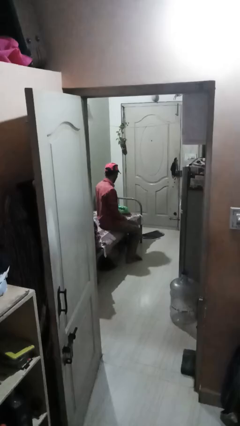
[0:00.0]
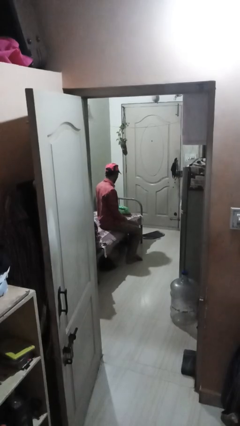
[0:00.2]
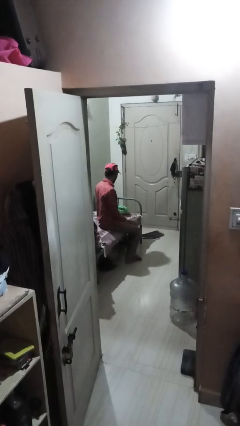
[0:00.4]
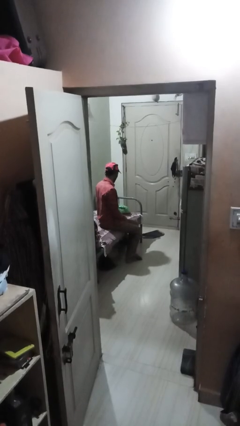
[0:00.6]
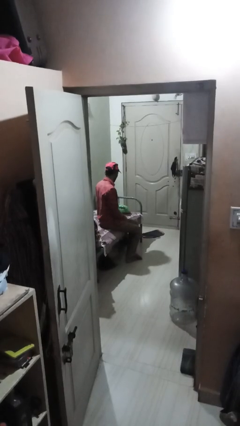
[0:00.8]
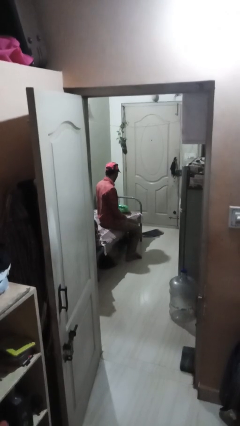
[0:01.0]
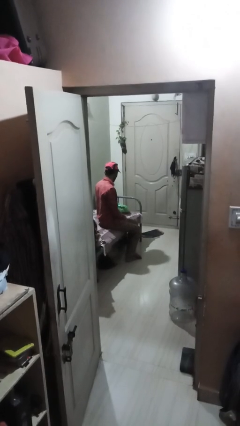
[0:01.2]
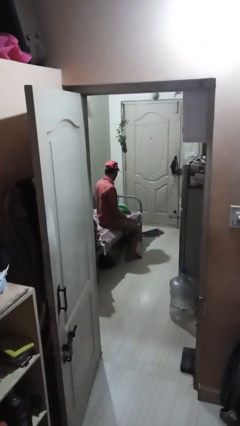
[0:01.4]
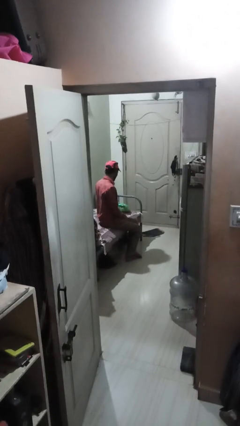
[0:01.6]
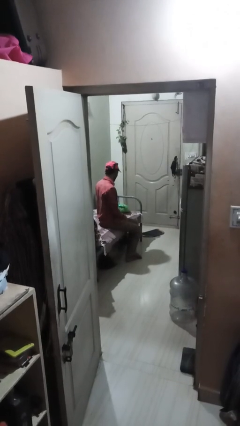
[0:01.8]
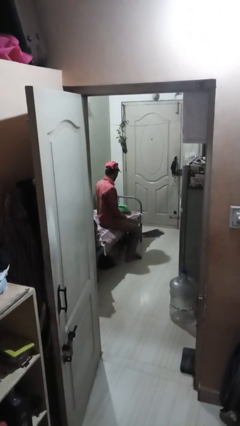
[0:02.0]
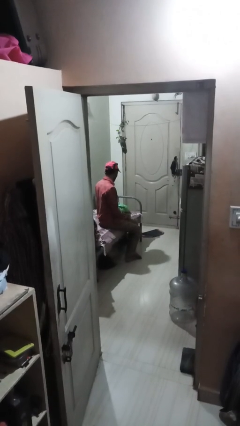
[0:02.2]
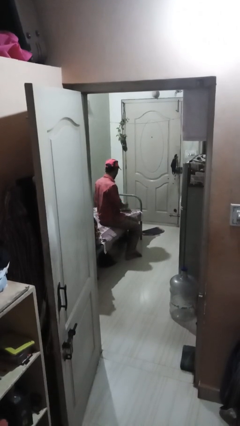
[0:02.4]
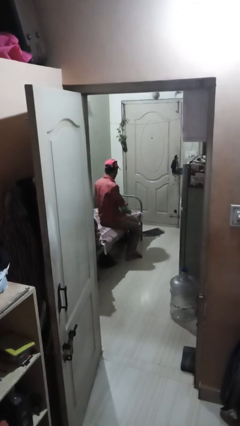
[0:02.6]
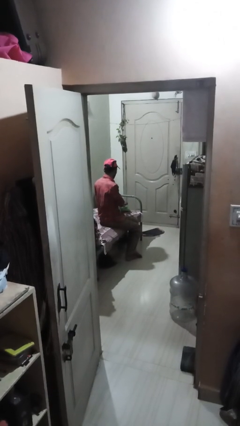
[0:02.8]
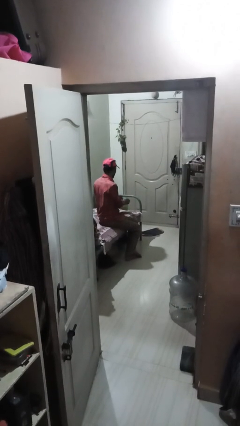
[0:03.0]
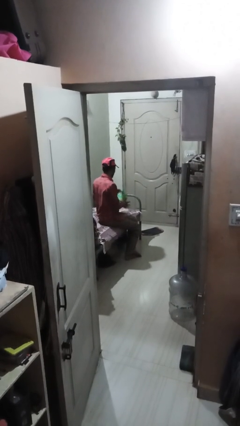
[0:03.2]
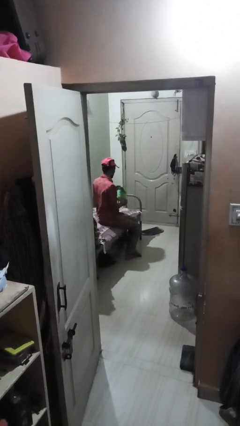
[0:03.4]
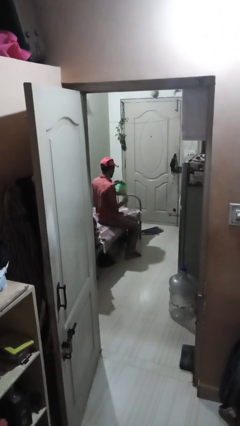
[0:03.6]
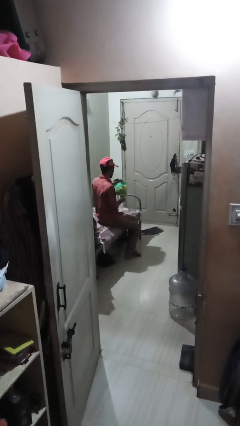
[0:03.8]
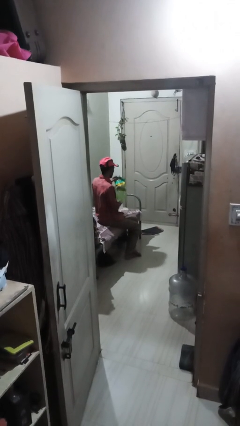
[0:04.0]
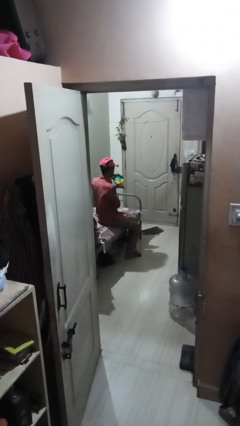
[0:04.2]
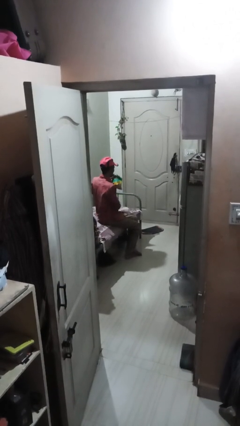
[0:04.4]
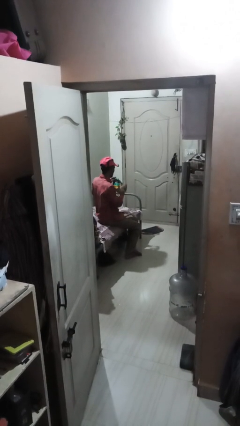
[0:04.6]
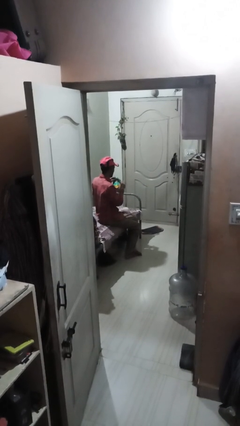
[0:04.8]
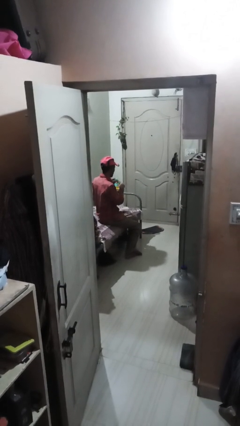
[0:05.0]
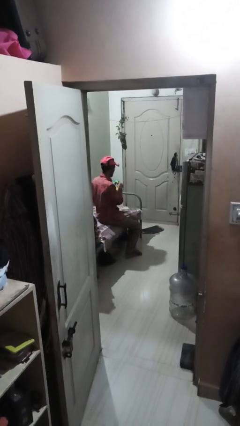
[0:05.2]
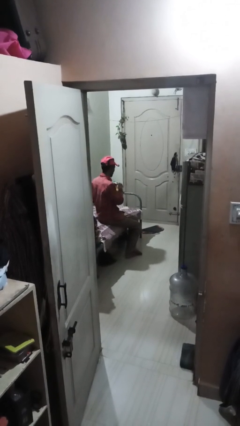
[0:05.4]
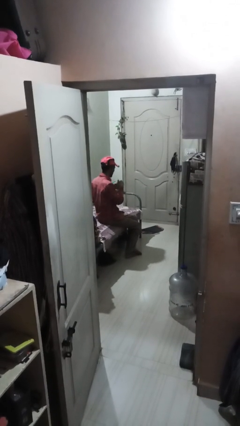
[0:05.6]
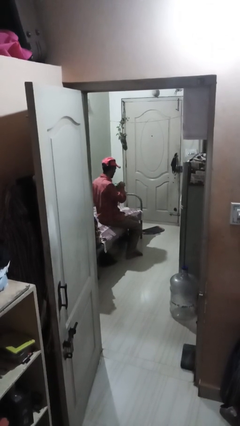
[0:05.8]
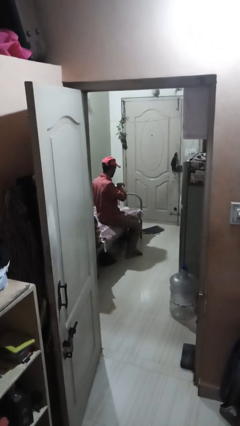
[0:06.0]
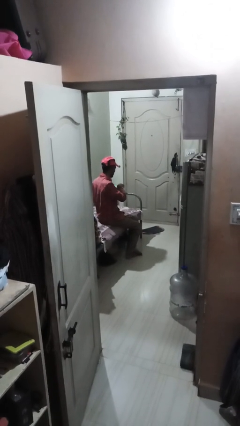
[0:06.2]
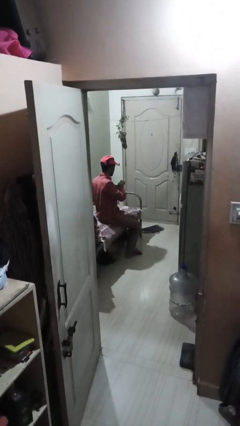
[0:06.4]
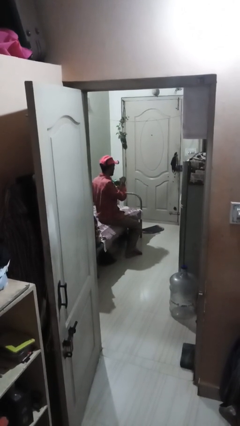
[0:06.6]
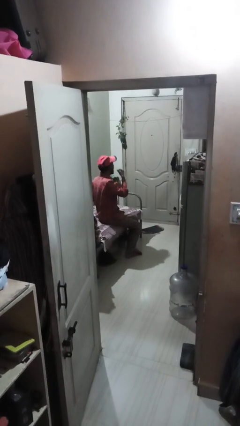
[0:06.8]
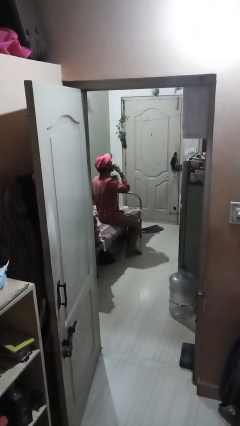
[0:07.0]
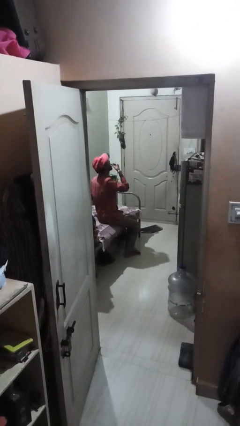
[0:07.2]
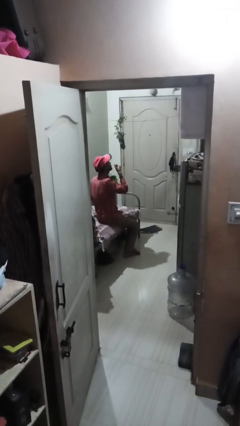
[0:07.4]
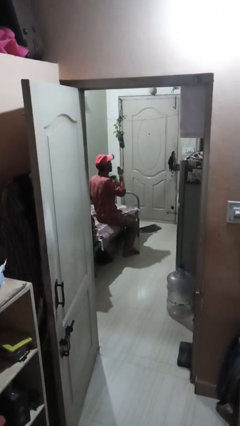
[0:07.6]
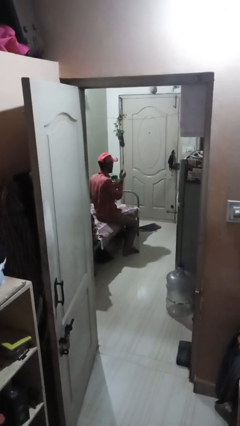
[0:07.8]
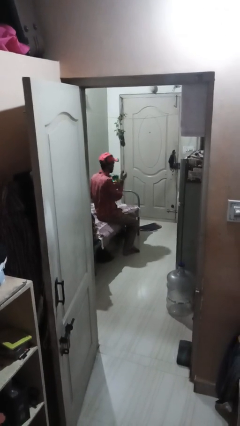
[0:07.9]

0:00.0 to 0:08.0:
person eats snack from bag

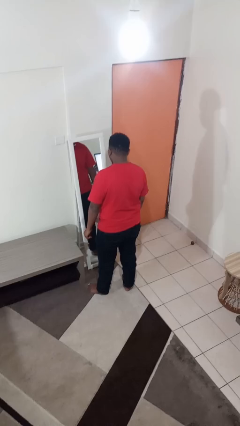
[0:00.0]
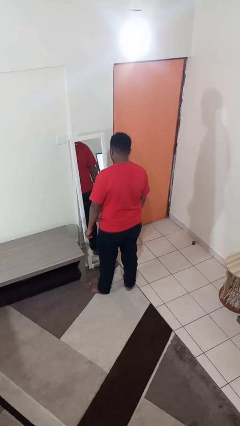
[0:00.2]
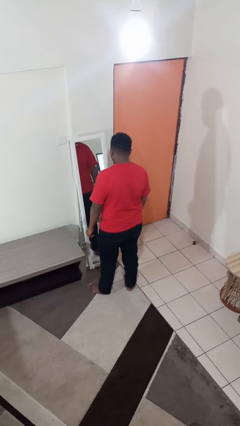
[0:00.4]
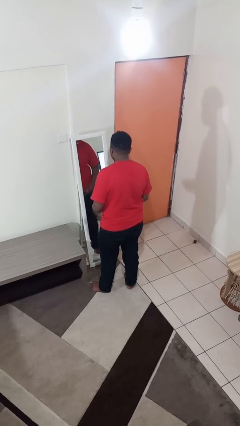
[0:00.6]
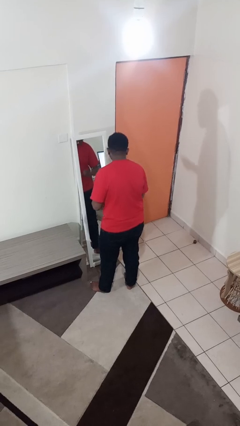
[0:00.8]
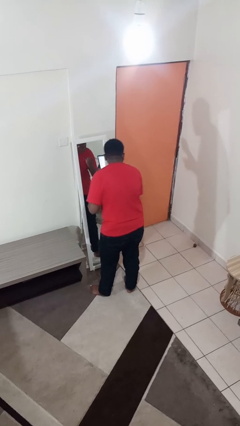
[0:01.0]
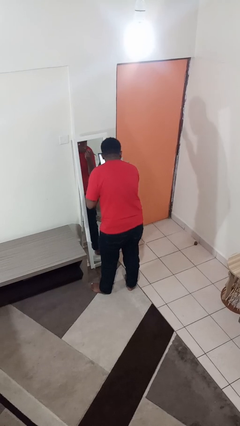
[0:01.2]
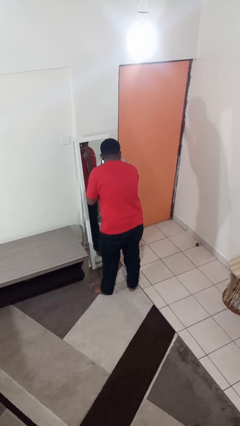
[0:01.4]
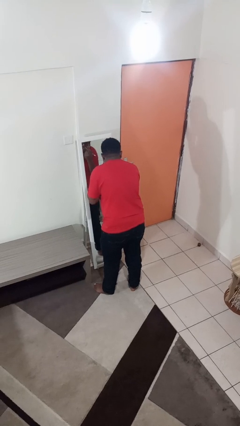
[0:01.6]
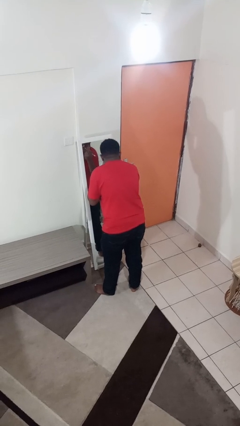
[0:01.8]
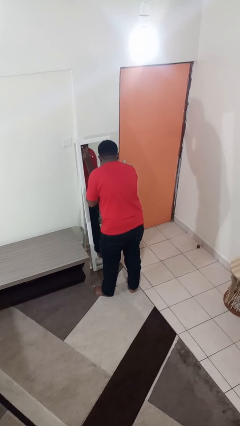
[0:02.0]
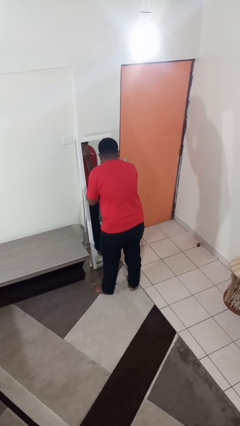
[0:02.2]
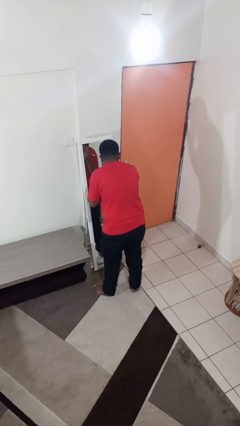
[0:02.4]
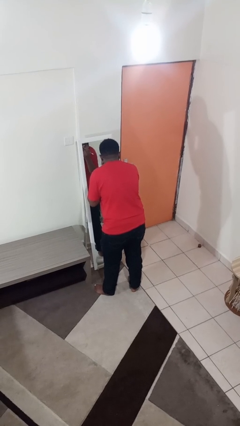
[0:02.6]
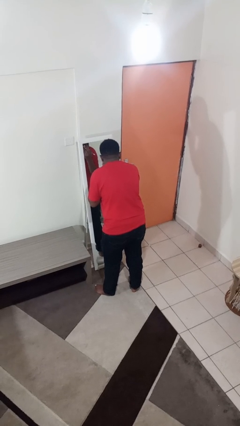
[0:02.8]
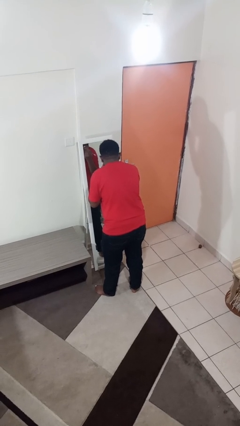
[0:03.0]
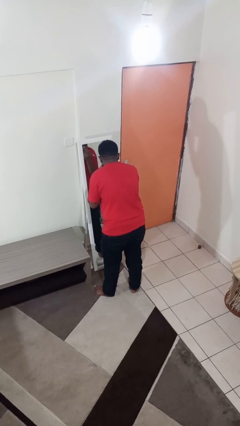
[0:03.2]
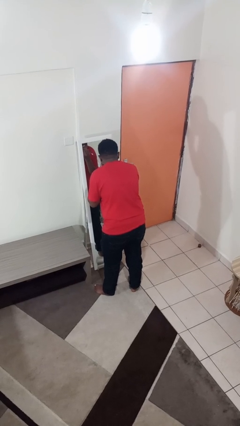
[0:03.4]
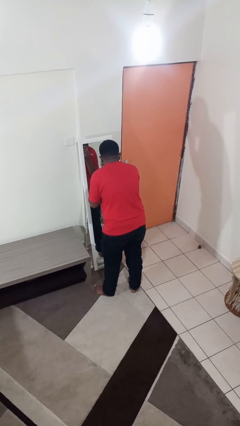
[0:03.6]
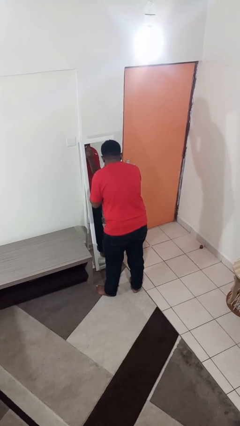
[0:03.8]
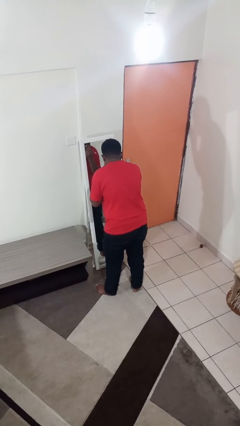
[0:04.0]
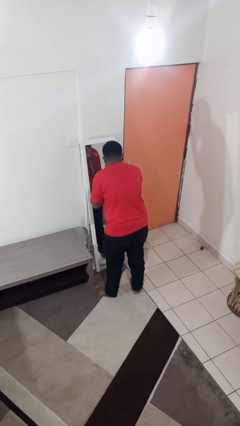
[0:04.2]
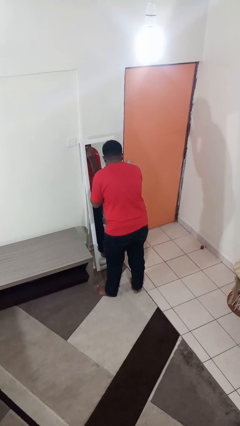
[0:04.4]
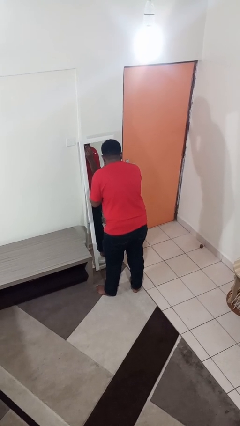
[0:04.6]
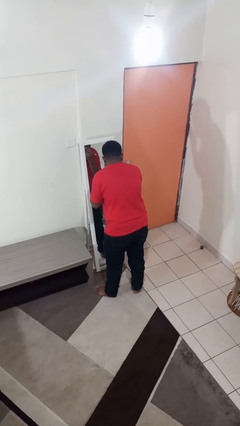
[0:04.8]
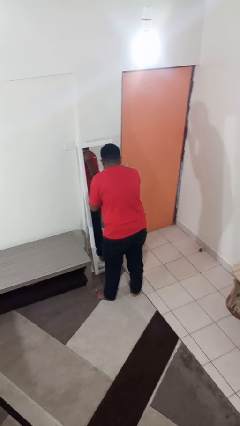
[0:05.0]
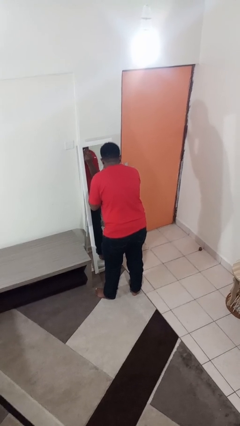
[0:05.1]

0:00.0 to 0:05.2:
person applies eye makeup

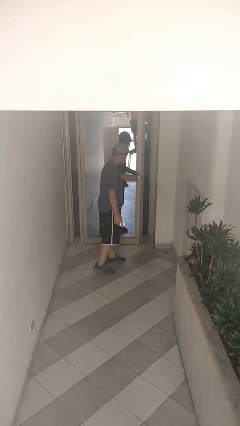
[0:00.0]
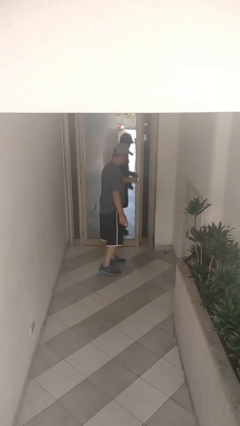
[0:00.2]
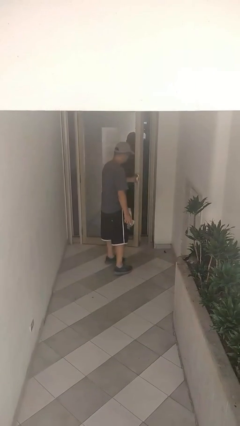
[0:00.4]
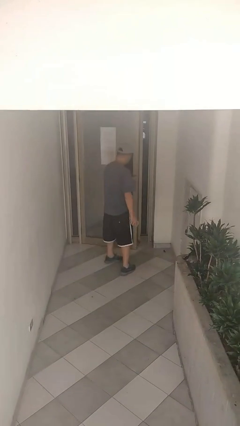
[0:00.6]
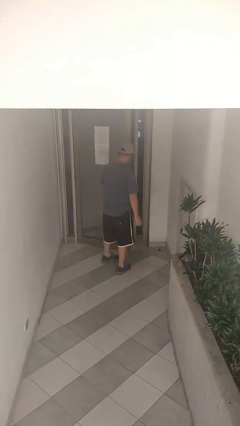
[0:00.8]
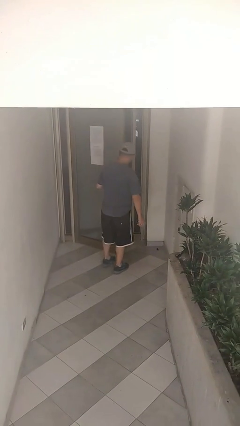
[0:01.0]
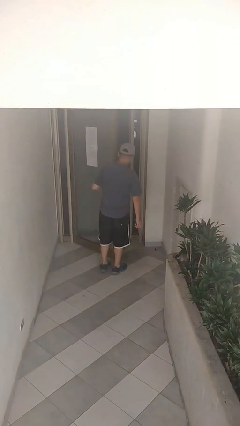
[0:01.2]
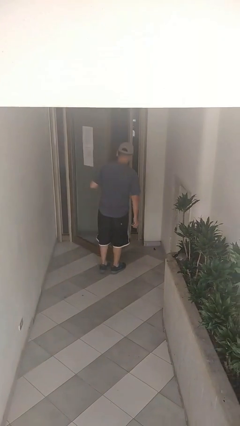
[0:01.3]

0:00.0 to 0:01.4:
person opens facility door

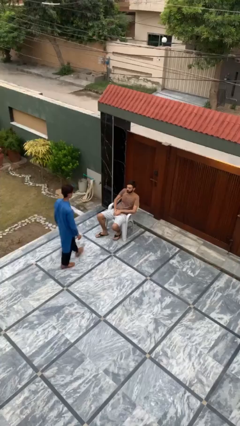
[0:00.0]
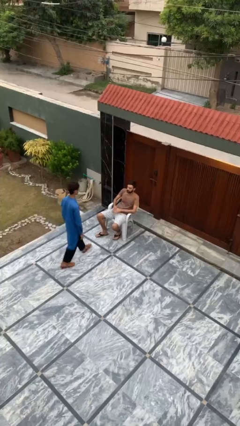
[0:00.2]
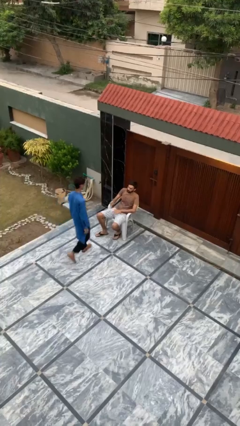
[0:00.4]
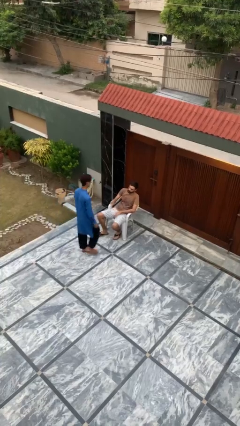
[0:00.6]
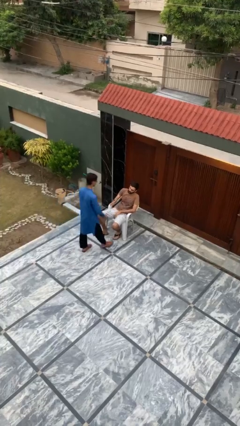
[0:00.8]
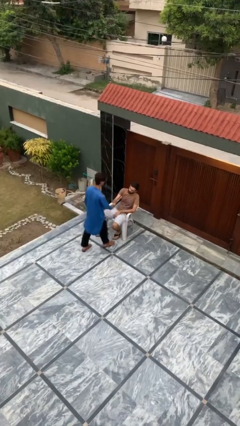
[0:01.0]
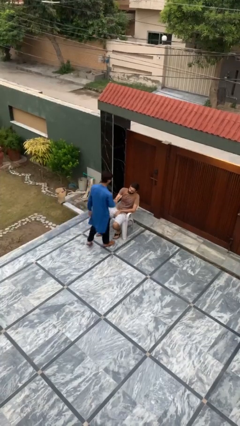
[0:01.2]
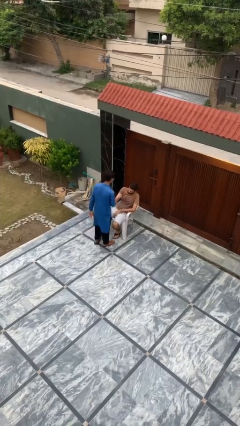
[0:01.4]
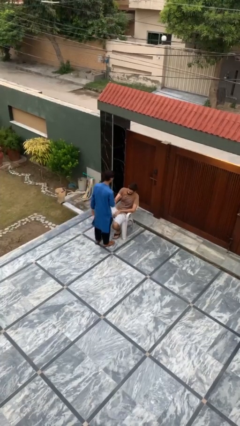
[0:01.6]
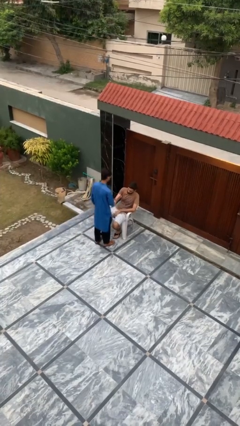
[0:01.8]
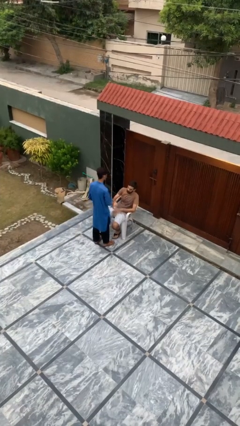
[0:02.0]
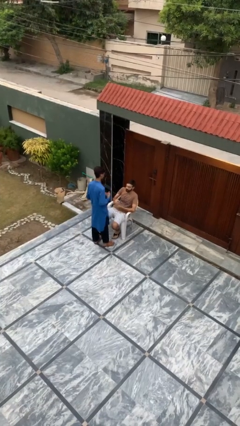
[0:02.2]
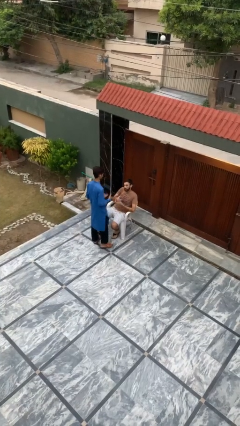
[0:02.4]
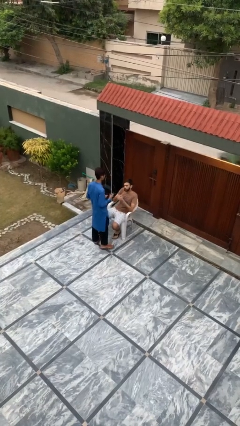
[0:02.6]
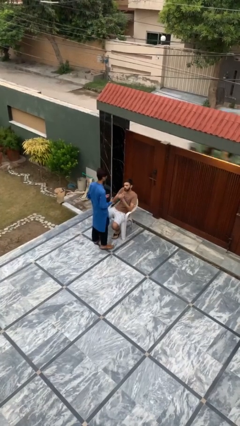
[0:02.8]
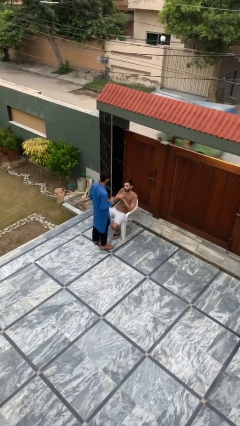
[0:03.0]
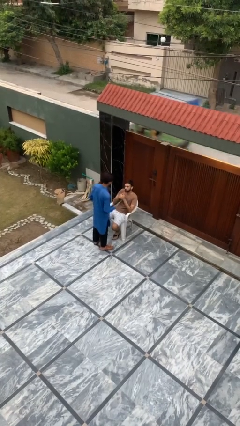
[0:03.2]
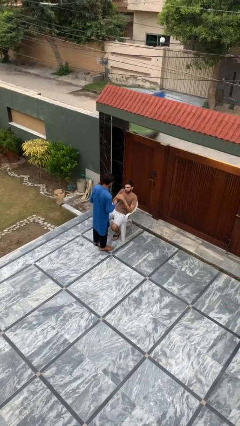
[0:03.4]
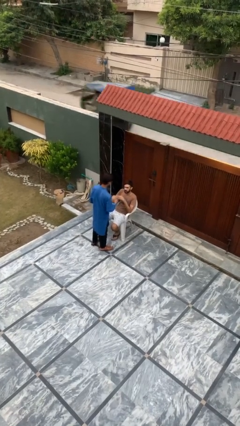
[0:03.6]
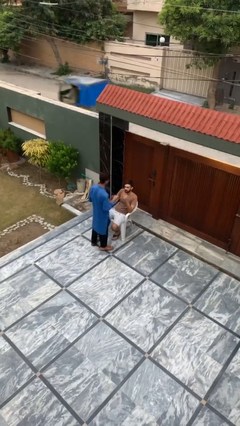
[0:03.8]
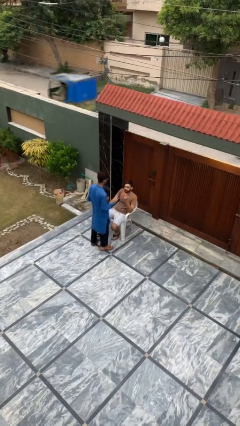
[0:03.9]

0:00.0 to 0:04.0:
person shakes hand
